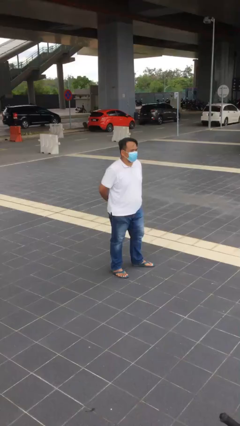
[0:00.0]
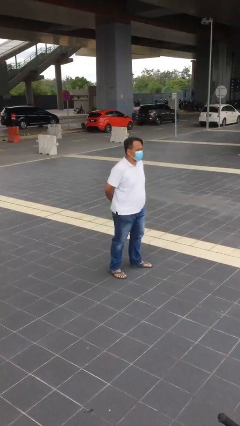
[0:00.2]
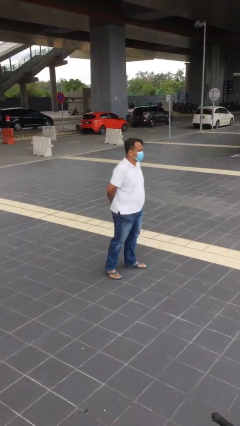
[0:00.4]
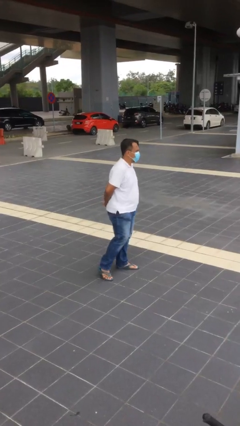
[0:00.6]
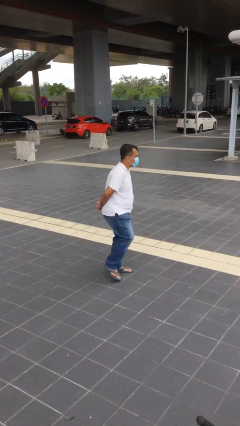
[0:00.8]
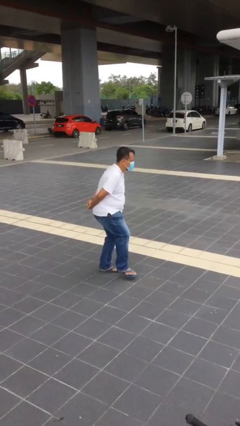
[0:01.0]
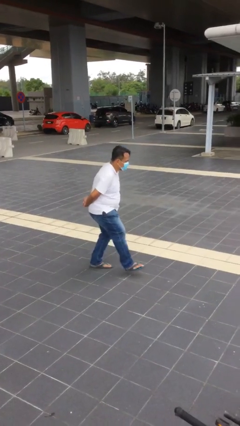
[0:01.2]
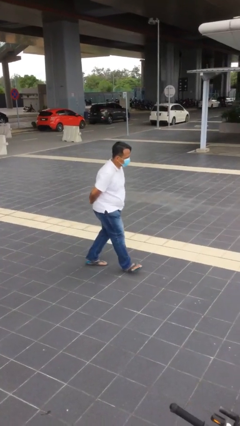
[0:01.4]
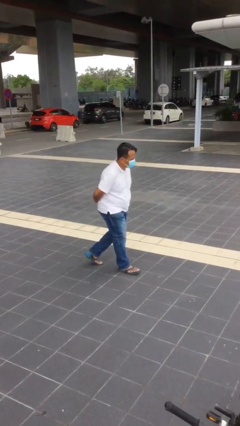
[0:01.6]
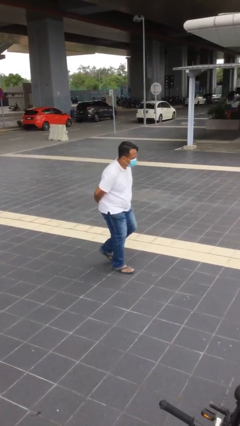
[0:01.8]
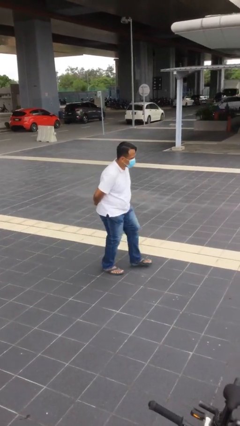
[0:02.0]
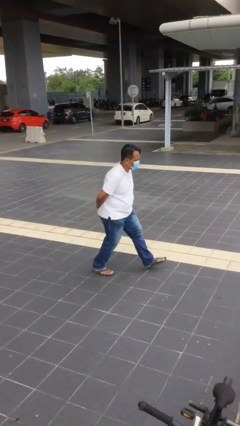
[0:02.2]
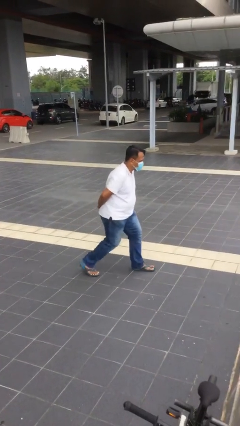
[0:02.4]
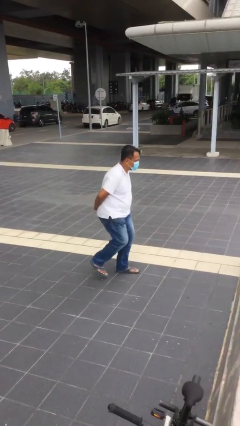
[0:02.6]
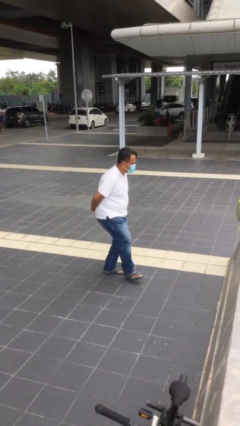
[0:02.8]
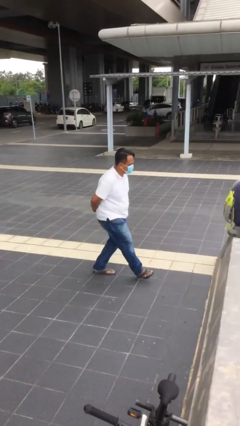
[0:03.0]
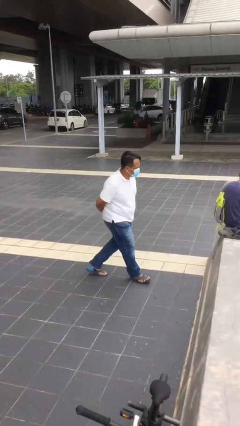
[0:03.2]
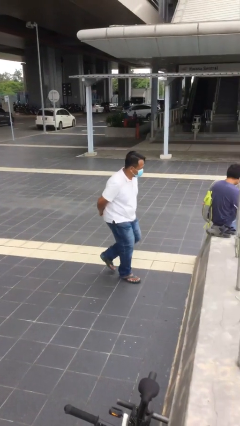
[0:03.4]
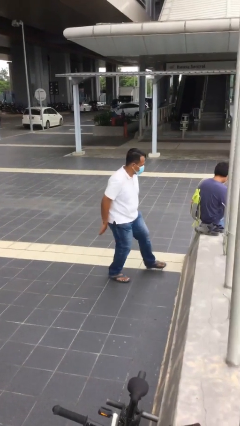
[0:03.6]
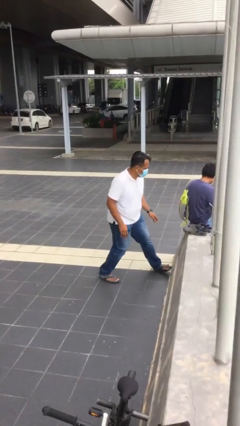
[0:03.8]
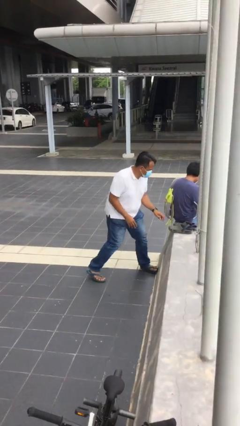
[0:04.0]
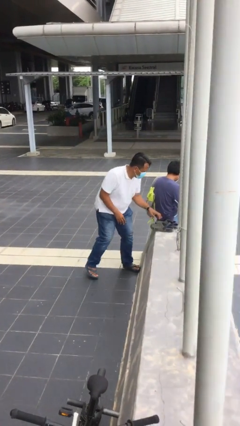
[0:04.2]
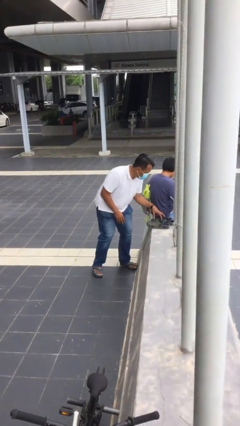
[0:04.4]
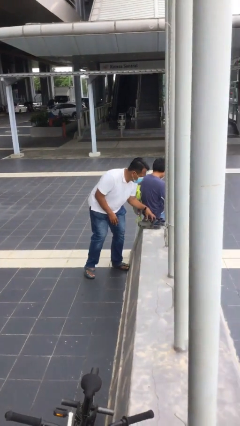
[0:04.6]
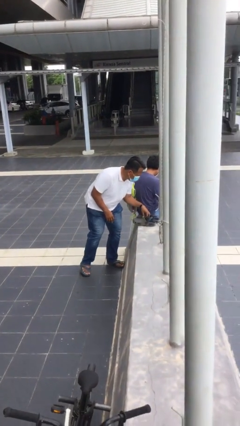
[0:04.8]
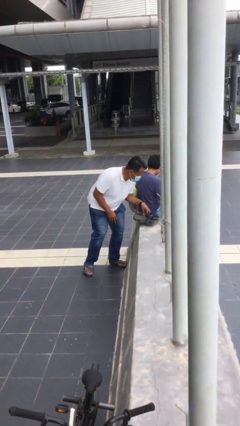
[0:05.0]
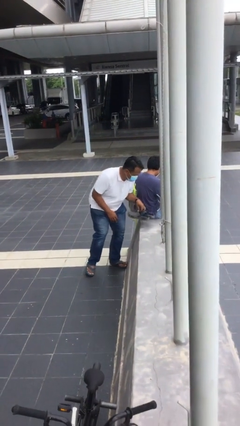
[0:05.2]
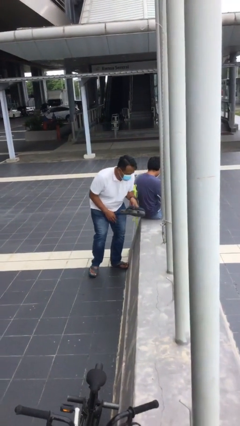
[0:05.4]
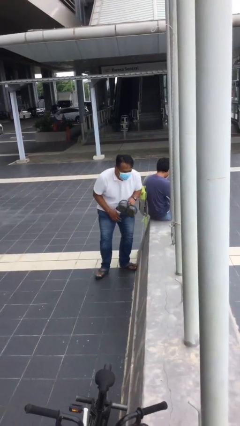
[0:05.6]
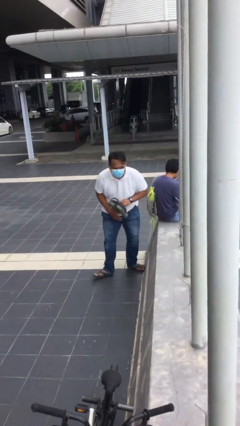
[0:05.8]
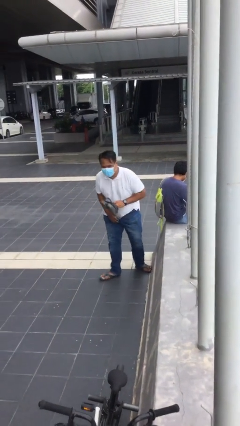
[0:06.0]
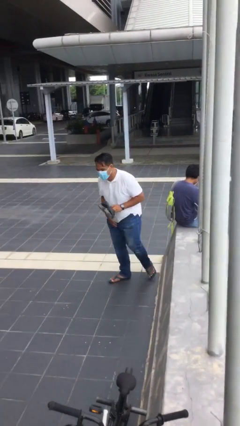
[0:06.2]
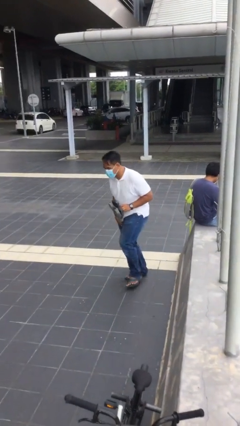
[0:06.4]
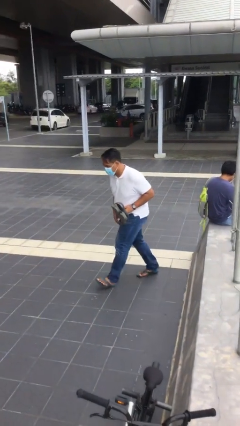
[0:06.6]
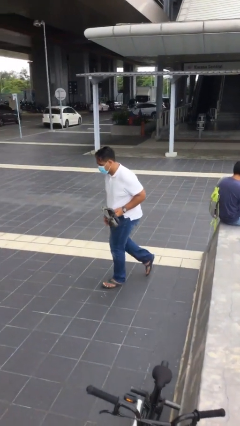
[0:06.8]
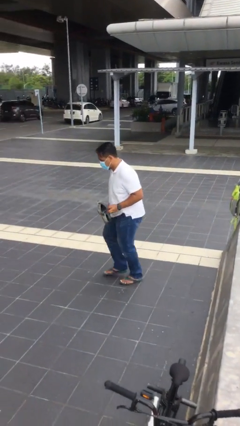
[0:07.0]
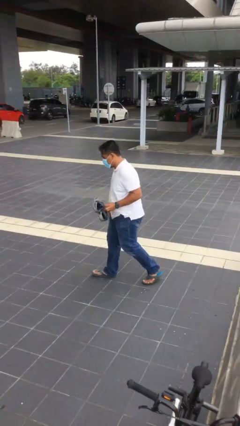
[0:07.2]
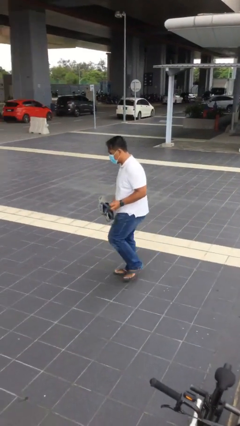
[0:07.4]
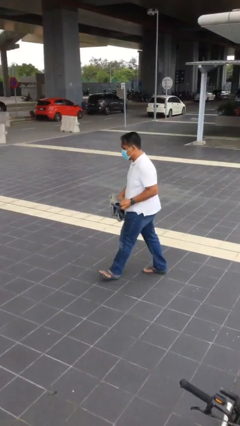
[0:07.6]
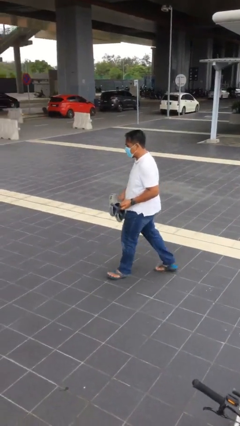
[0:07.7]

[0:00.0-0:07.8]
person steals object from person

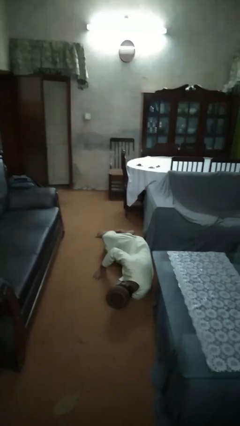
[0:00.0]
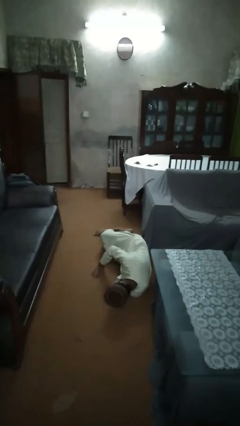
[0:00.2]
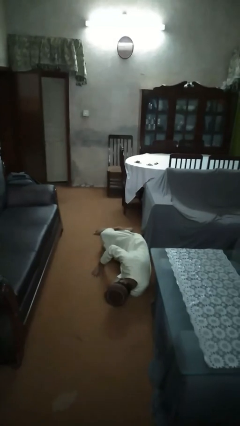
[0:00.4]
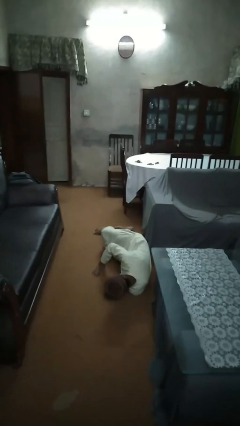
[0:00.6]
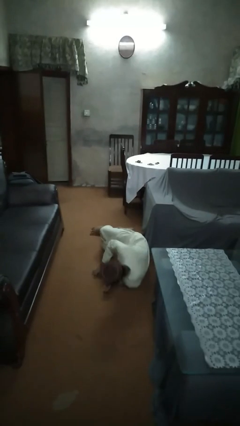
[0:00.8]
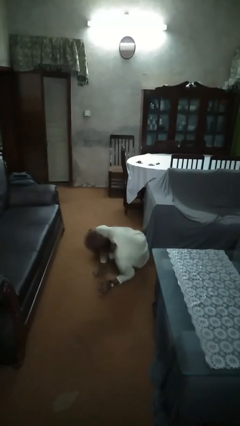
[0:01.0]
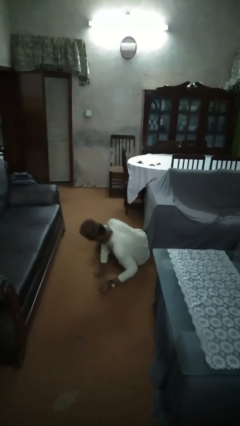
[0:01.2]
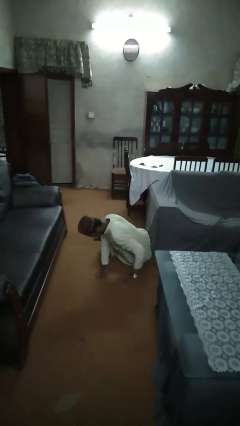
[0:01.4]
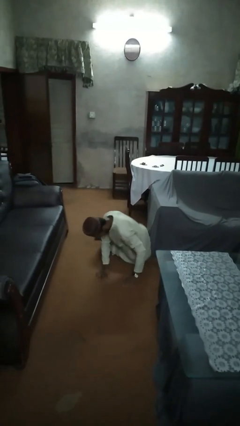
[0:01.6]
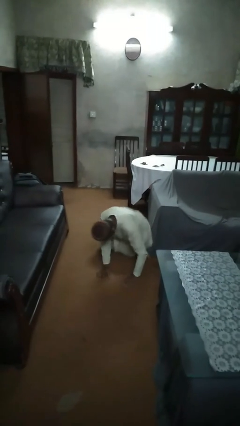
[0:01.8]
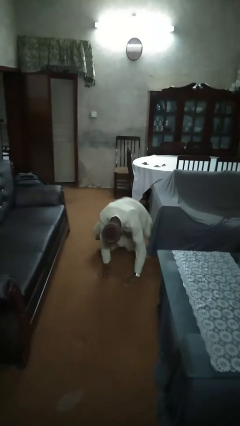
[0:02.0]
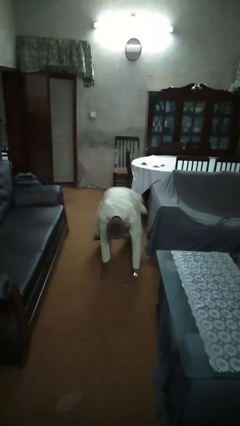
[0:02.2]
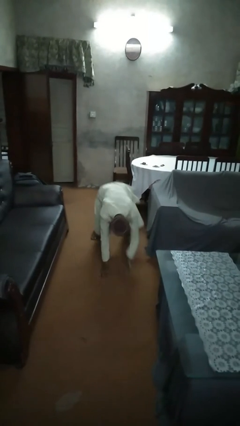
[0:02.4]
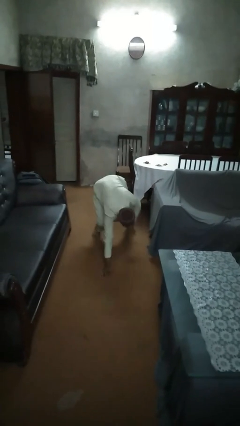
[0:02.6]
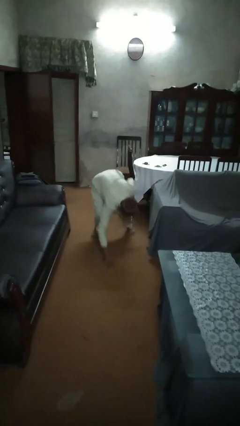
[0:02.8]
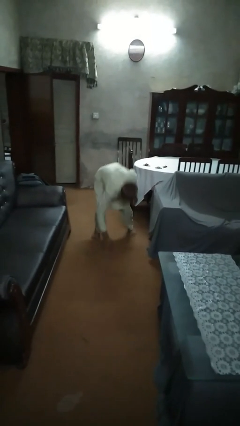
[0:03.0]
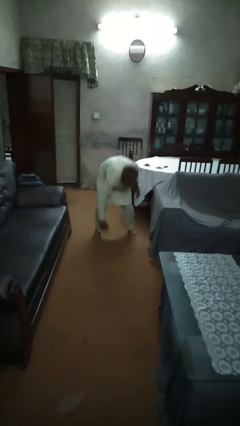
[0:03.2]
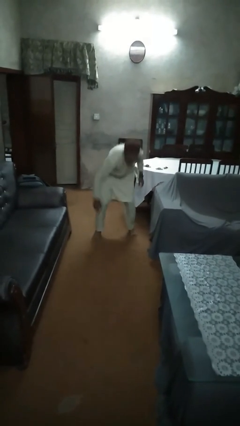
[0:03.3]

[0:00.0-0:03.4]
person stands up from floor

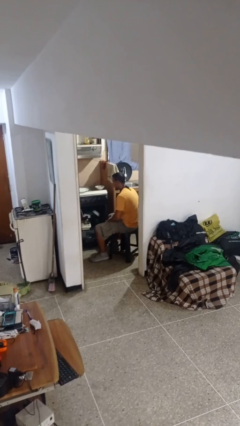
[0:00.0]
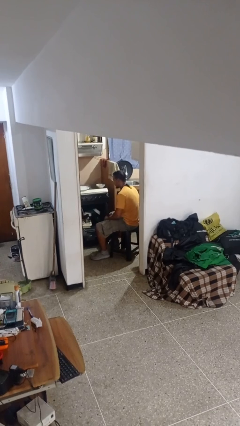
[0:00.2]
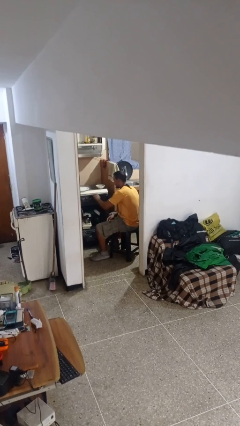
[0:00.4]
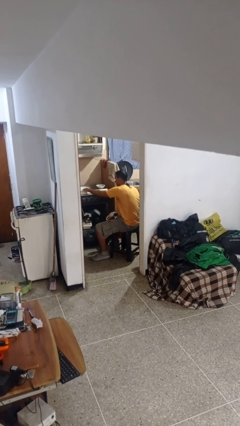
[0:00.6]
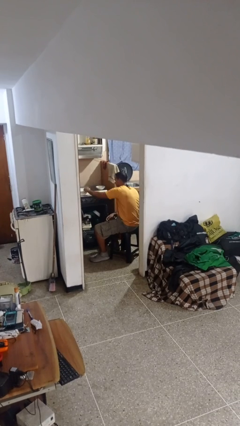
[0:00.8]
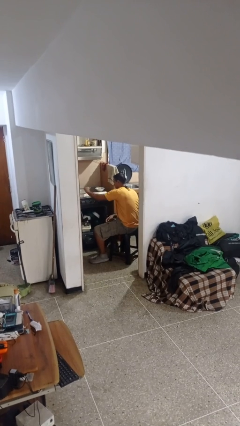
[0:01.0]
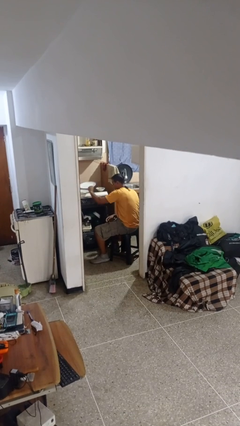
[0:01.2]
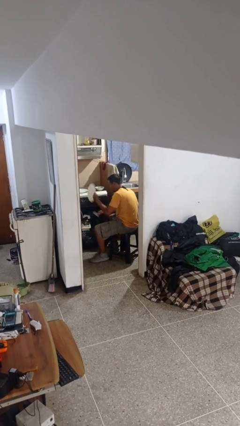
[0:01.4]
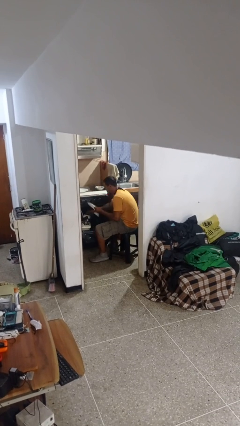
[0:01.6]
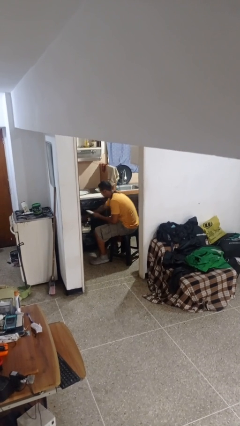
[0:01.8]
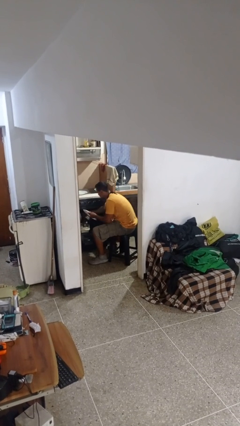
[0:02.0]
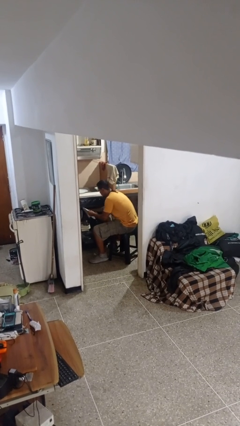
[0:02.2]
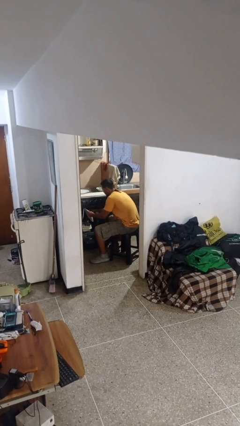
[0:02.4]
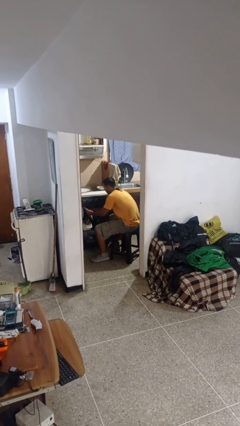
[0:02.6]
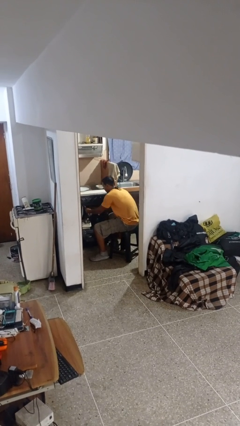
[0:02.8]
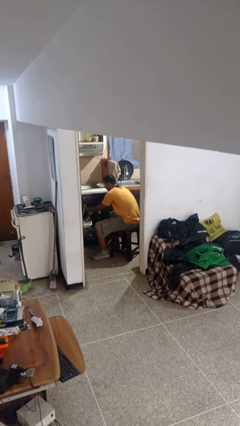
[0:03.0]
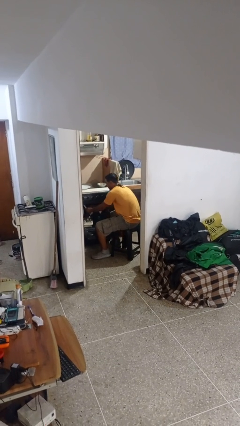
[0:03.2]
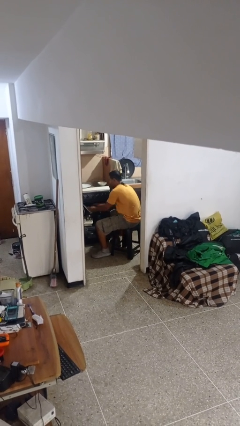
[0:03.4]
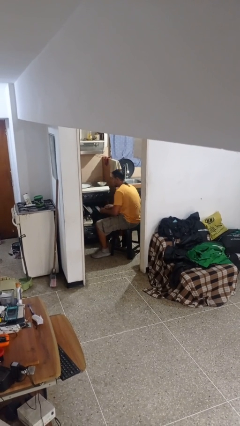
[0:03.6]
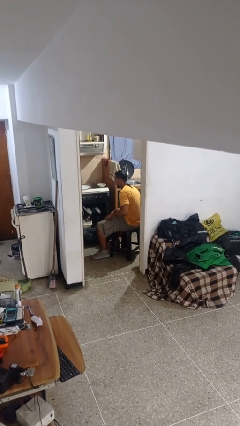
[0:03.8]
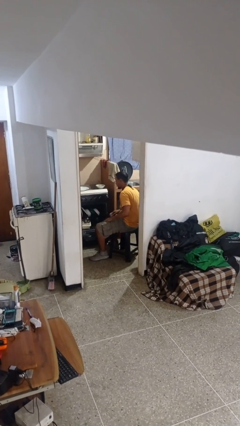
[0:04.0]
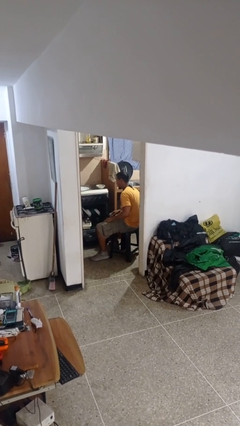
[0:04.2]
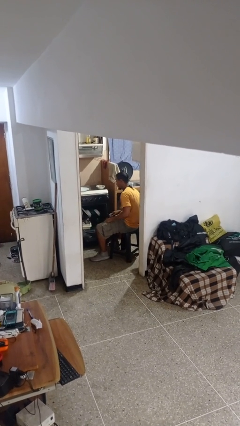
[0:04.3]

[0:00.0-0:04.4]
person loads dishwasher

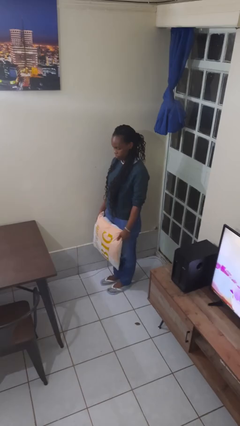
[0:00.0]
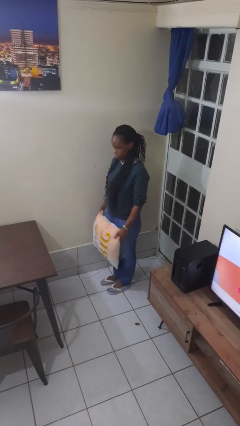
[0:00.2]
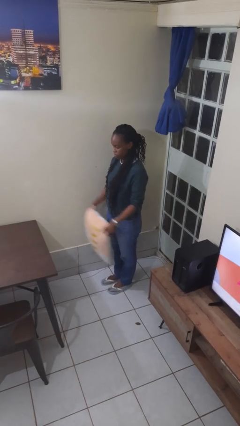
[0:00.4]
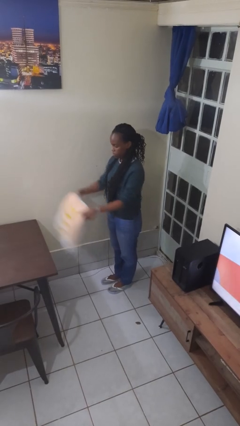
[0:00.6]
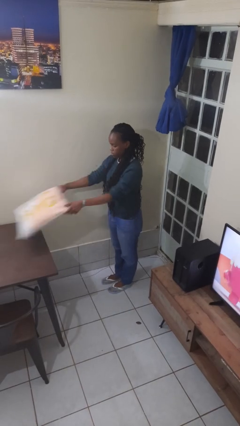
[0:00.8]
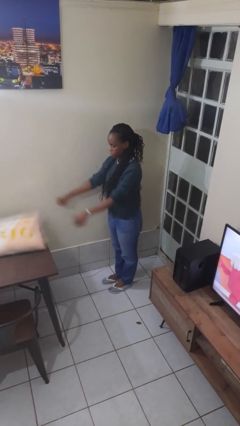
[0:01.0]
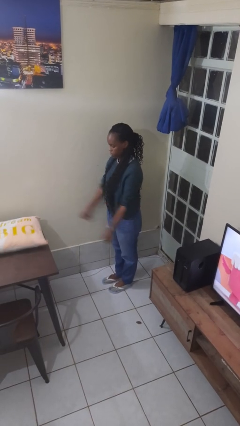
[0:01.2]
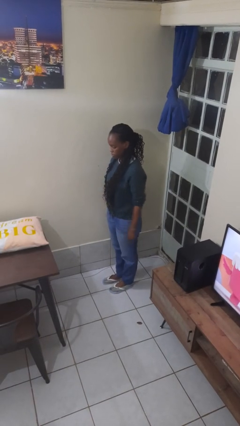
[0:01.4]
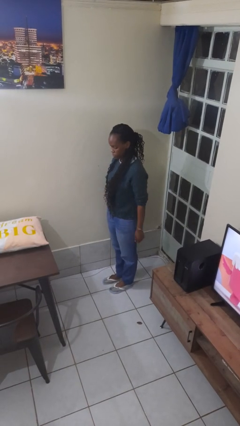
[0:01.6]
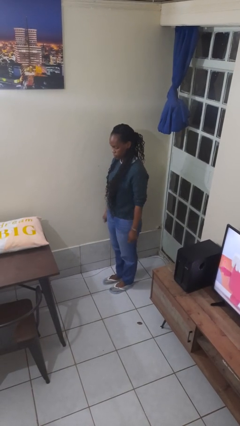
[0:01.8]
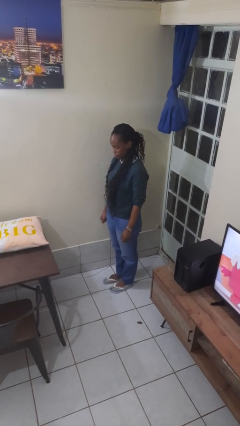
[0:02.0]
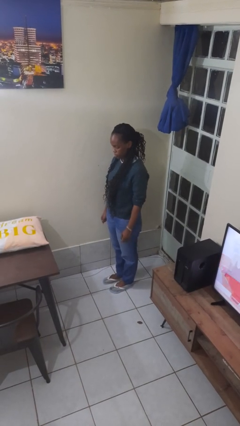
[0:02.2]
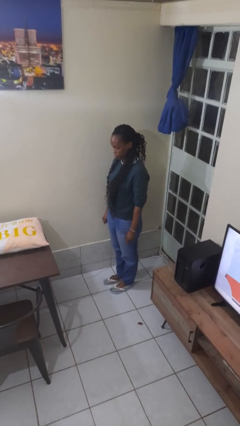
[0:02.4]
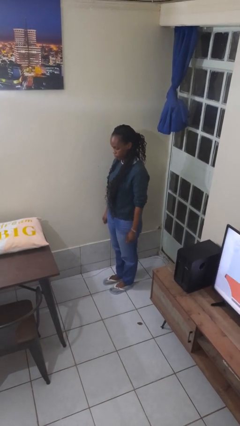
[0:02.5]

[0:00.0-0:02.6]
person throws object on table
